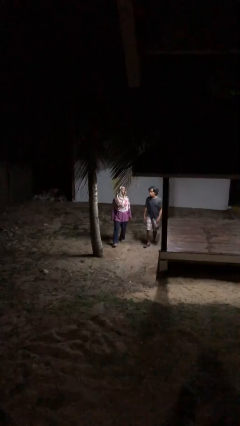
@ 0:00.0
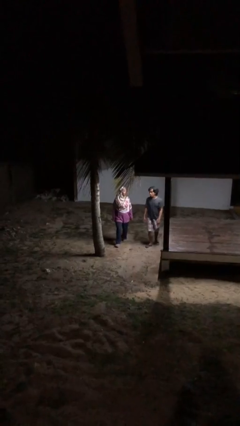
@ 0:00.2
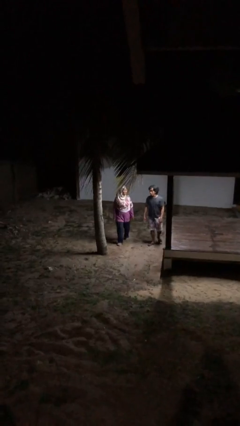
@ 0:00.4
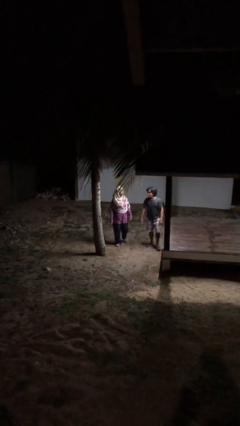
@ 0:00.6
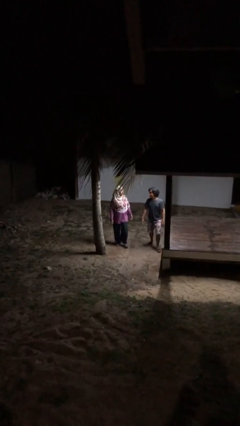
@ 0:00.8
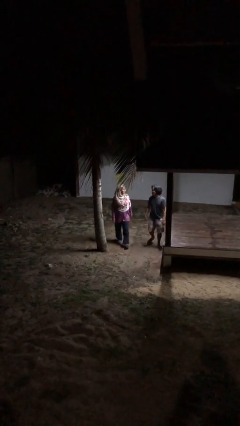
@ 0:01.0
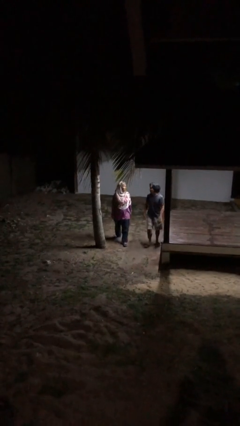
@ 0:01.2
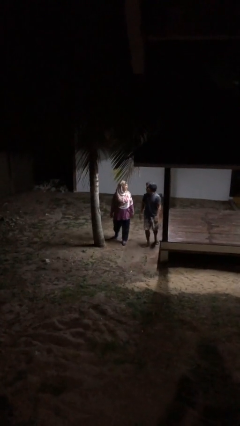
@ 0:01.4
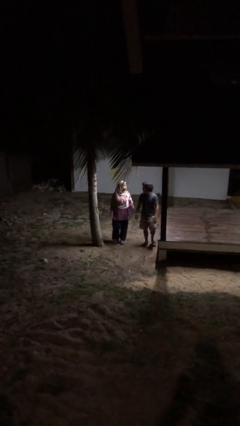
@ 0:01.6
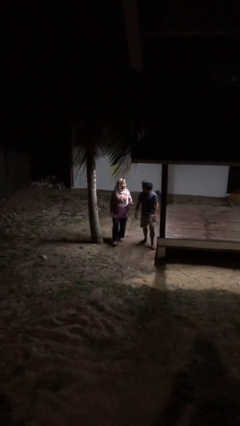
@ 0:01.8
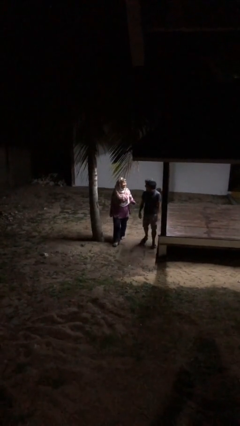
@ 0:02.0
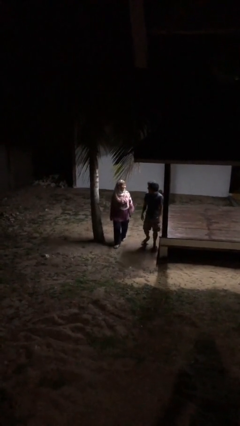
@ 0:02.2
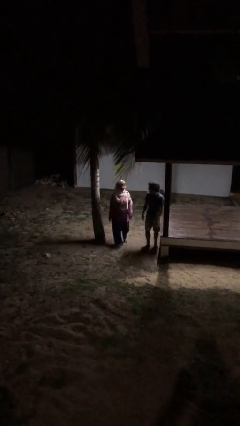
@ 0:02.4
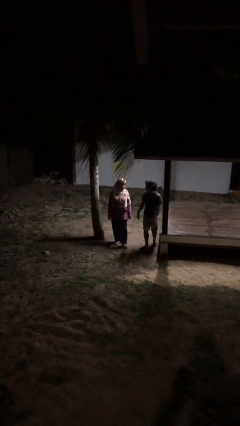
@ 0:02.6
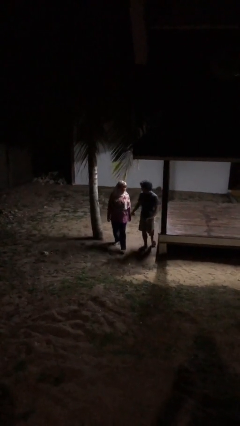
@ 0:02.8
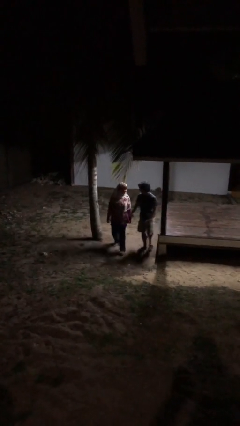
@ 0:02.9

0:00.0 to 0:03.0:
person talks to person

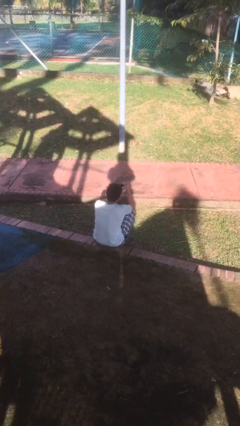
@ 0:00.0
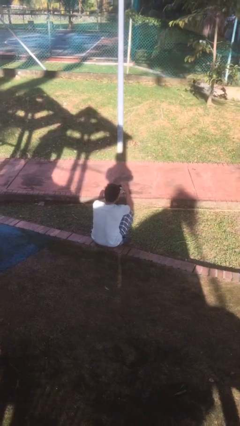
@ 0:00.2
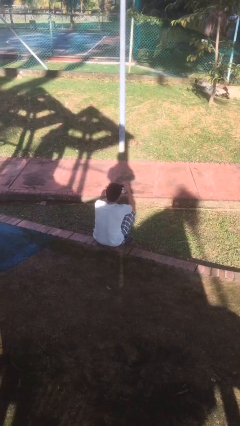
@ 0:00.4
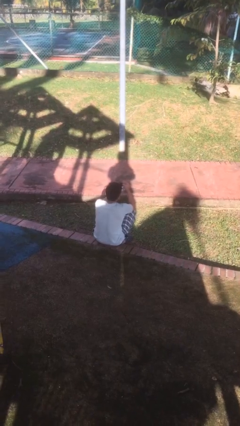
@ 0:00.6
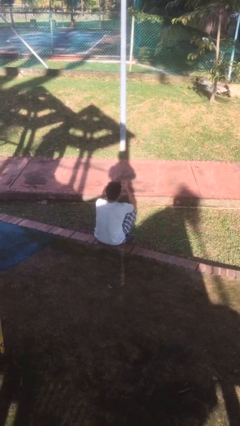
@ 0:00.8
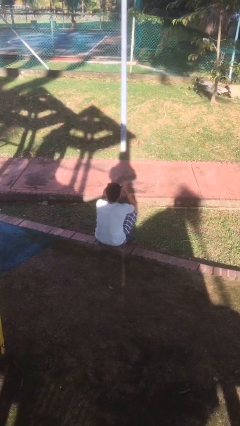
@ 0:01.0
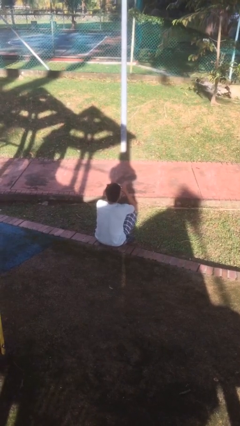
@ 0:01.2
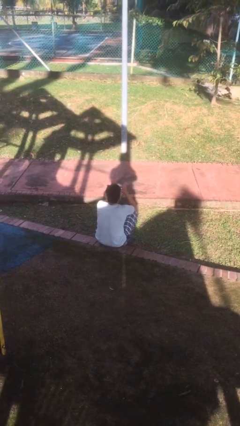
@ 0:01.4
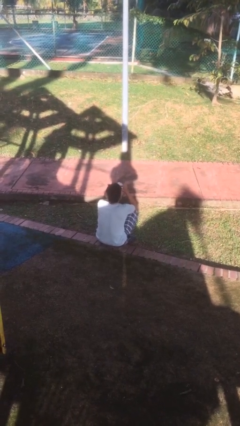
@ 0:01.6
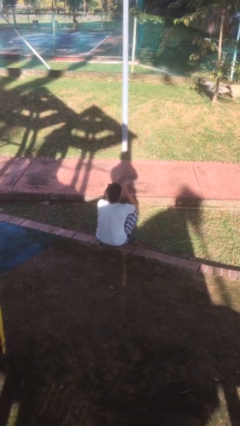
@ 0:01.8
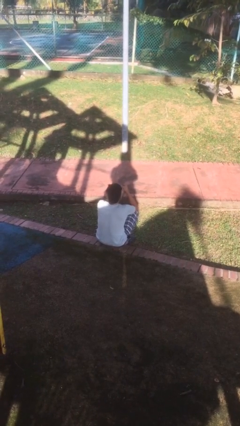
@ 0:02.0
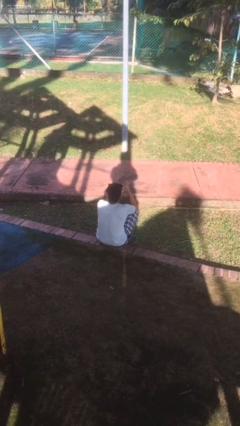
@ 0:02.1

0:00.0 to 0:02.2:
person drinks from mug

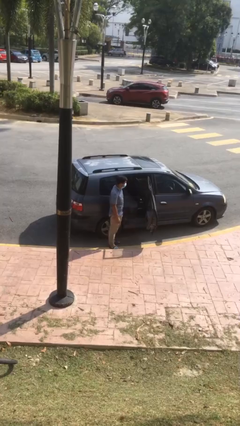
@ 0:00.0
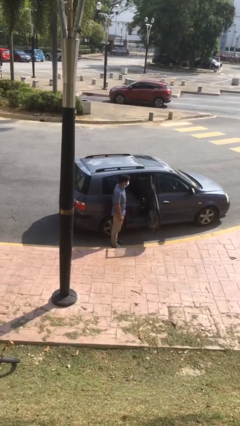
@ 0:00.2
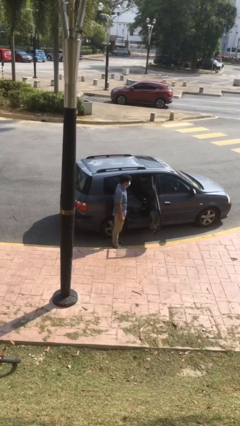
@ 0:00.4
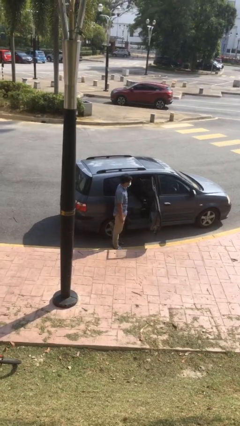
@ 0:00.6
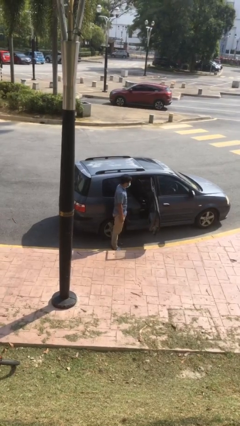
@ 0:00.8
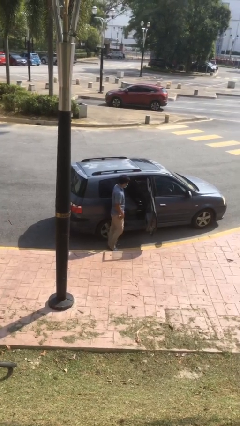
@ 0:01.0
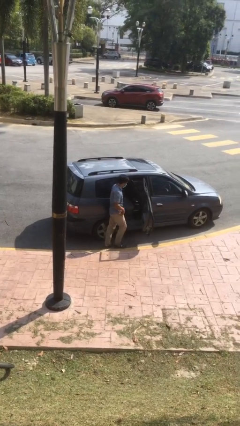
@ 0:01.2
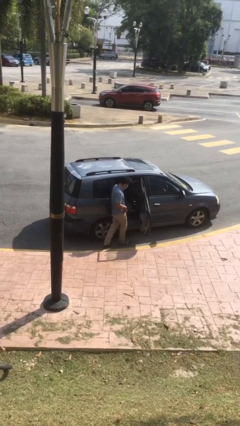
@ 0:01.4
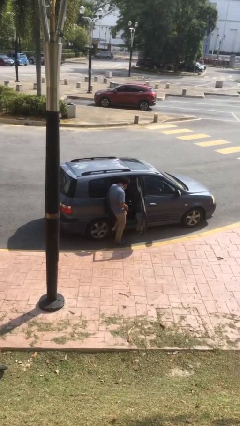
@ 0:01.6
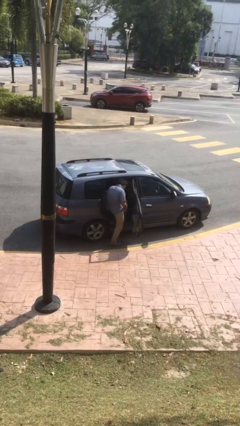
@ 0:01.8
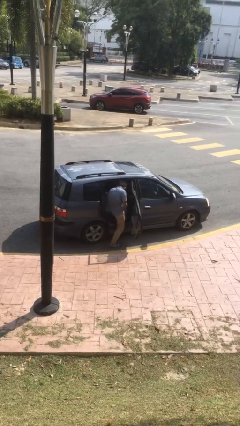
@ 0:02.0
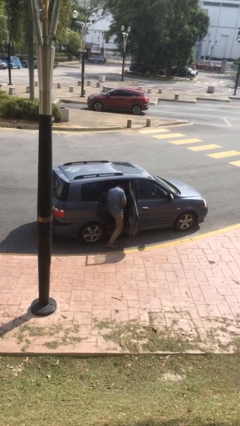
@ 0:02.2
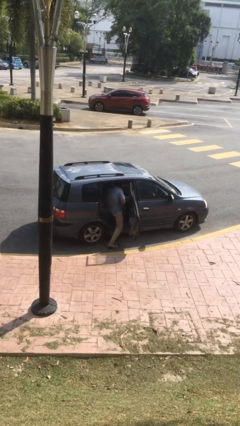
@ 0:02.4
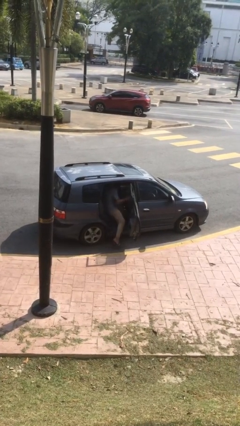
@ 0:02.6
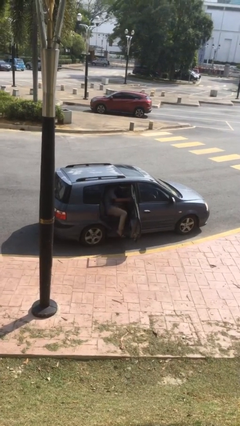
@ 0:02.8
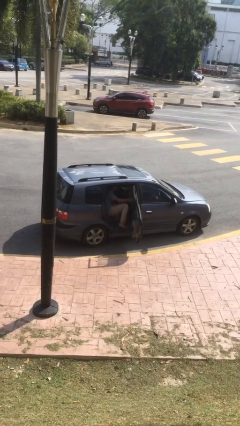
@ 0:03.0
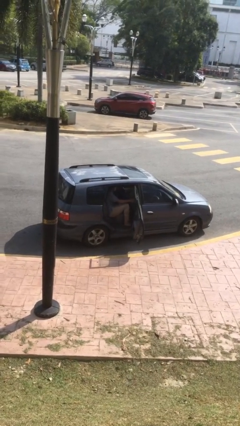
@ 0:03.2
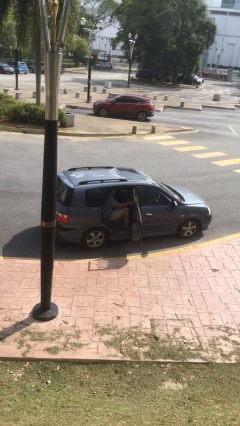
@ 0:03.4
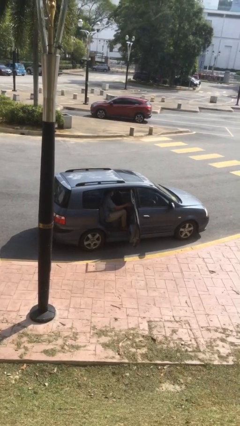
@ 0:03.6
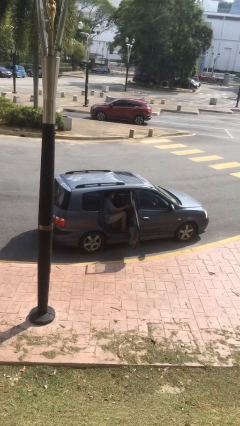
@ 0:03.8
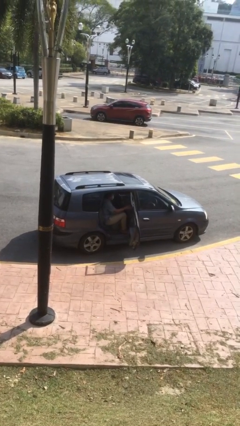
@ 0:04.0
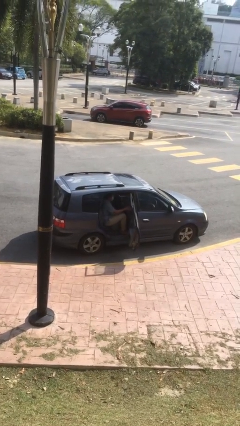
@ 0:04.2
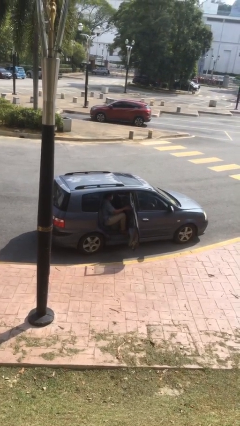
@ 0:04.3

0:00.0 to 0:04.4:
person enters car

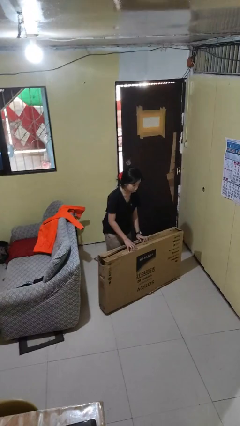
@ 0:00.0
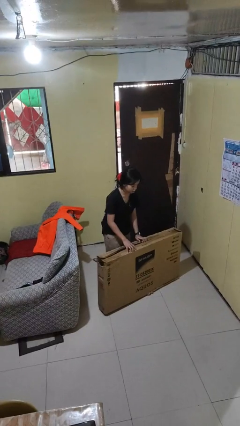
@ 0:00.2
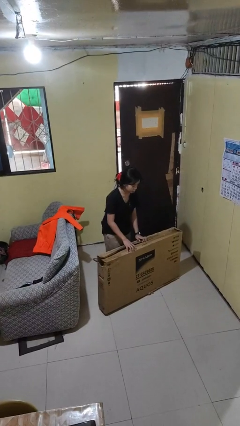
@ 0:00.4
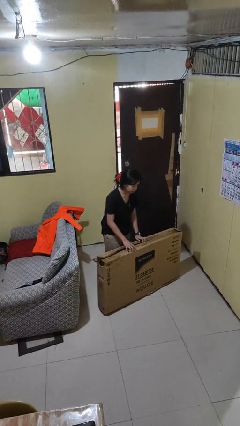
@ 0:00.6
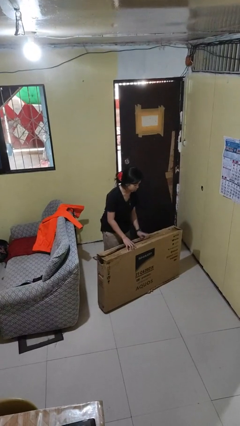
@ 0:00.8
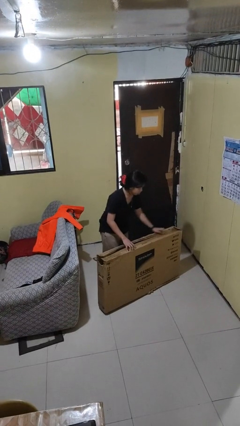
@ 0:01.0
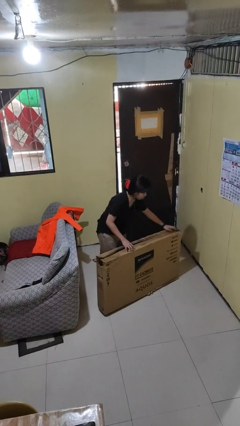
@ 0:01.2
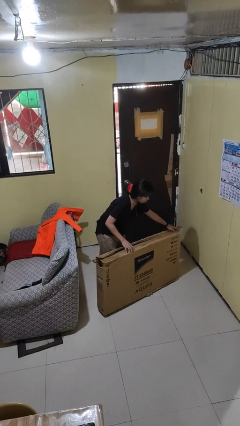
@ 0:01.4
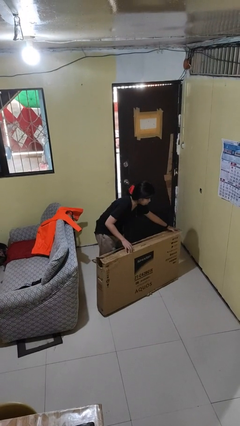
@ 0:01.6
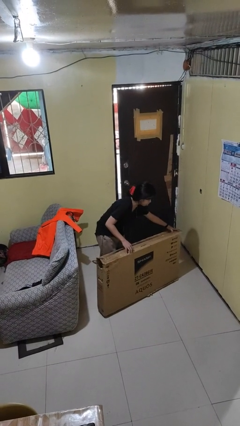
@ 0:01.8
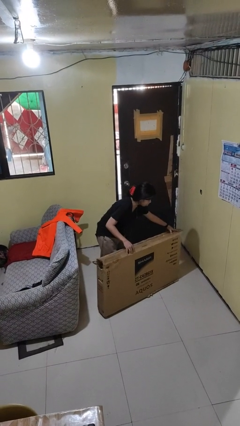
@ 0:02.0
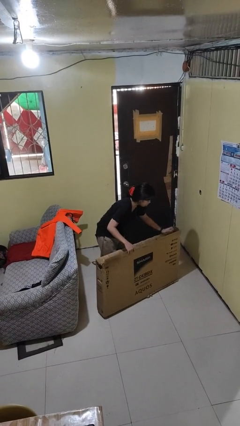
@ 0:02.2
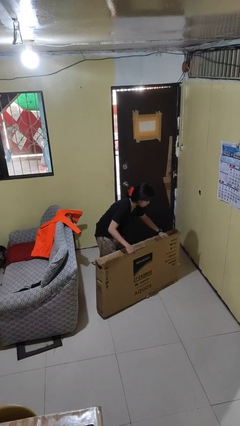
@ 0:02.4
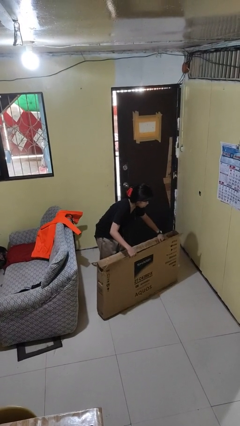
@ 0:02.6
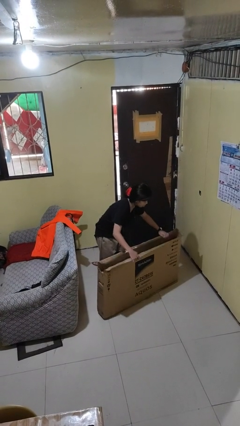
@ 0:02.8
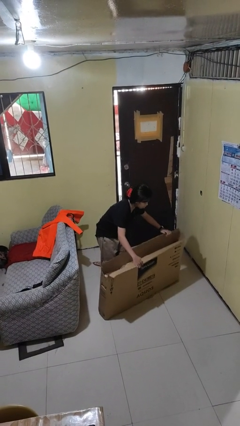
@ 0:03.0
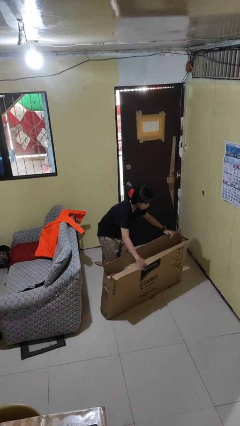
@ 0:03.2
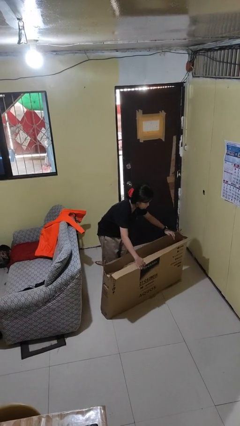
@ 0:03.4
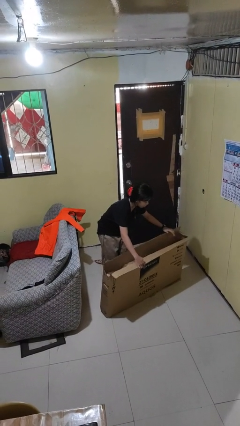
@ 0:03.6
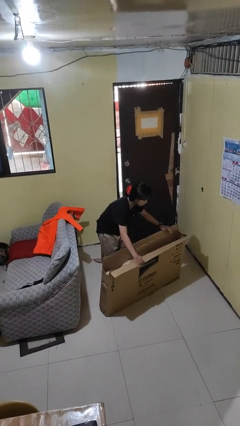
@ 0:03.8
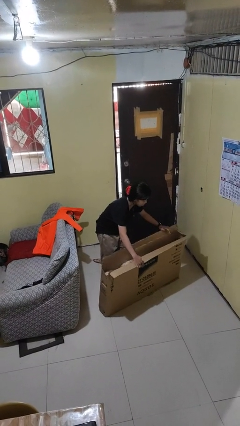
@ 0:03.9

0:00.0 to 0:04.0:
person opens box

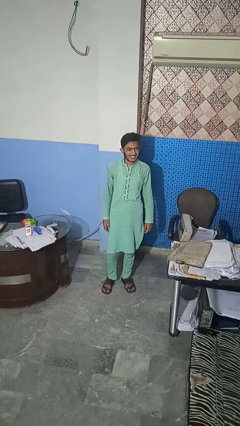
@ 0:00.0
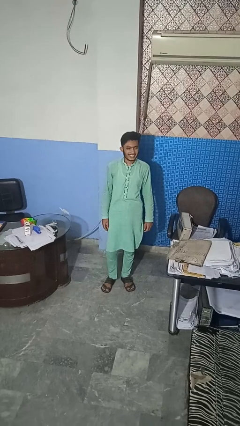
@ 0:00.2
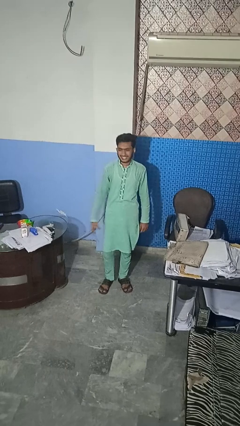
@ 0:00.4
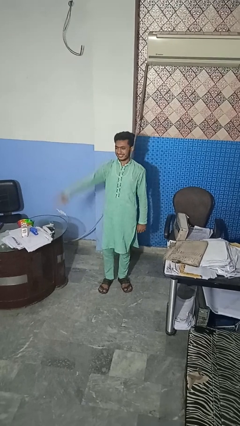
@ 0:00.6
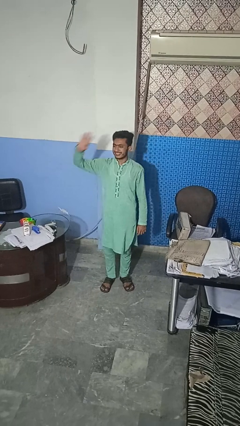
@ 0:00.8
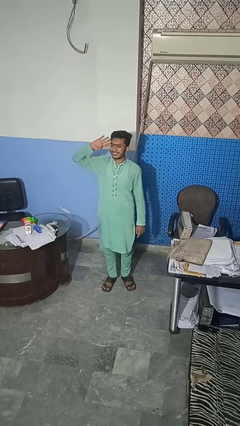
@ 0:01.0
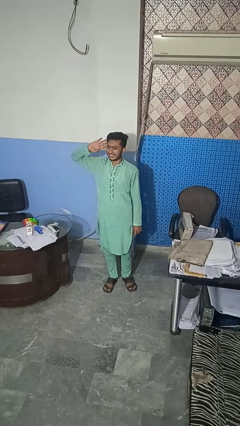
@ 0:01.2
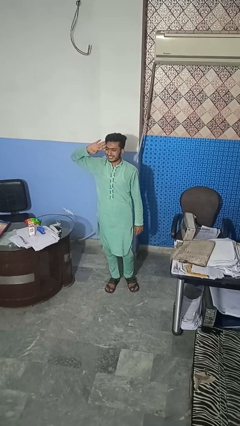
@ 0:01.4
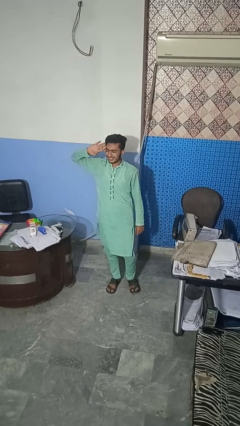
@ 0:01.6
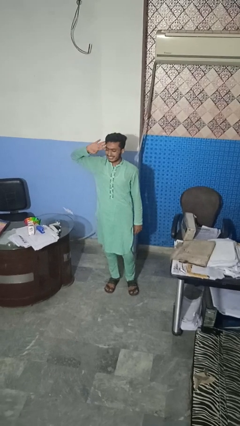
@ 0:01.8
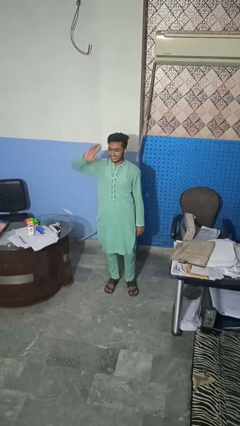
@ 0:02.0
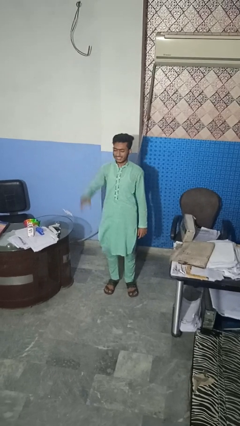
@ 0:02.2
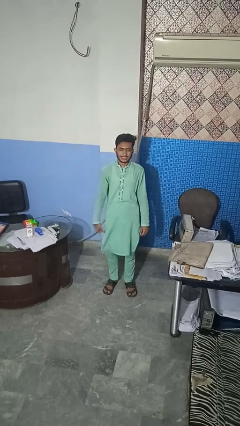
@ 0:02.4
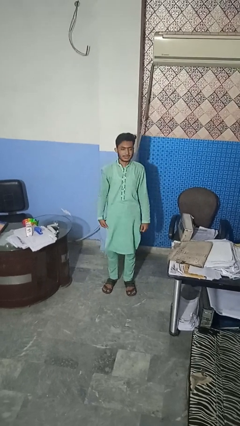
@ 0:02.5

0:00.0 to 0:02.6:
person salutes

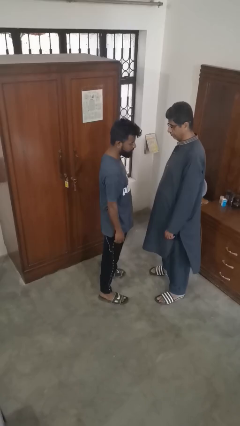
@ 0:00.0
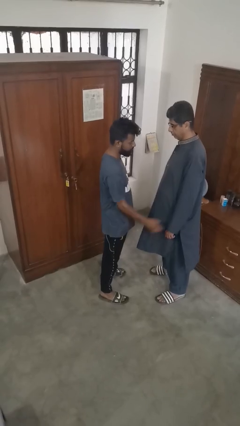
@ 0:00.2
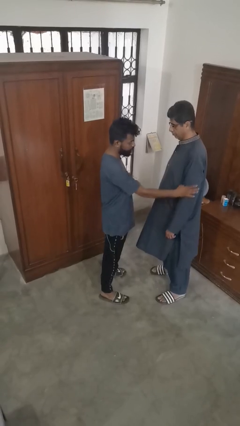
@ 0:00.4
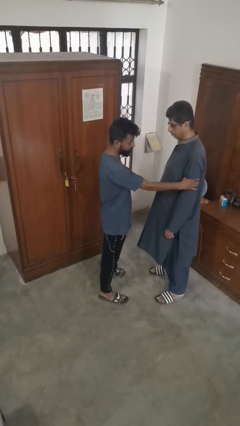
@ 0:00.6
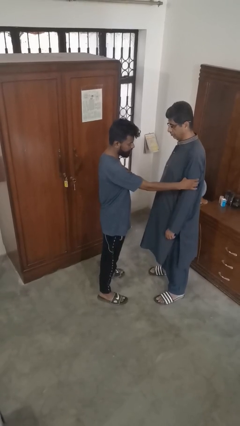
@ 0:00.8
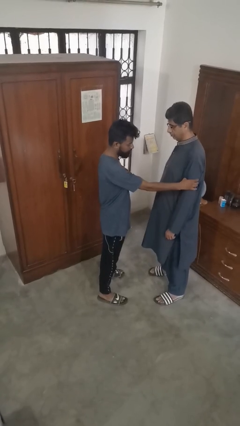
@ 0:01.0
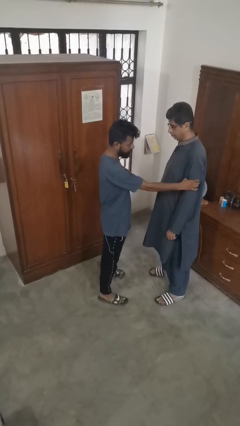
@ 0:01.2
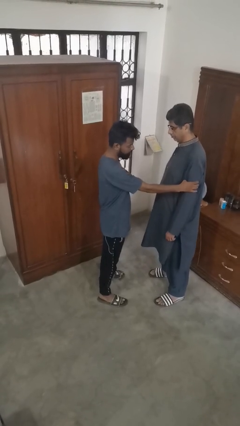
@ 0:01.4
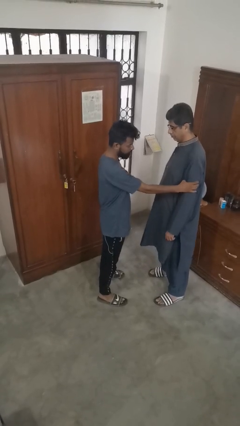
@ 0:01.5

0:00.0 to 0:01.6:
person grabs person by bicep
